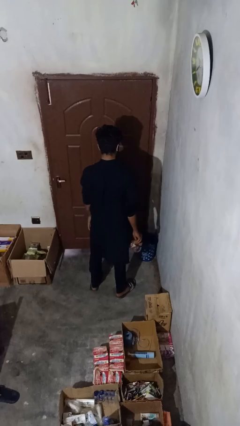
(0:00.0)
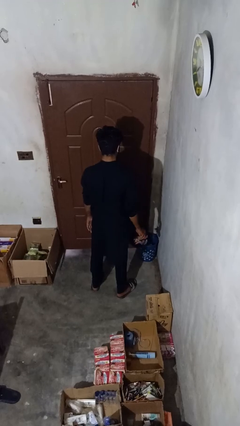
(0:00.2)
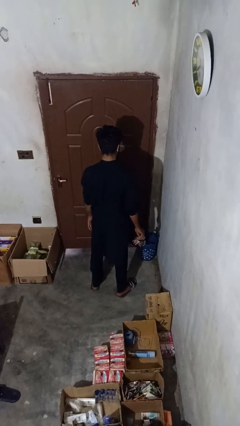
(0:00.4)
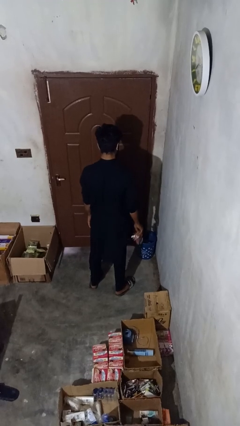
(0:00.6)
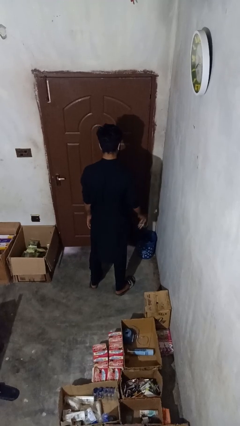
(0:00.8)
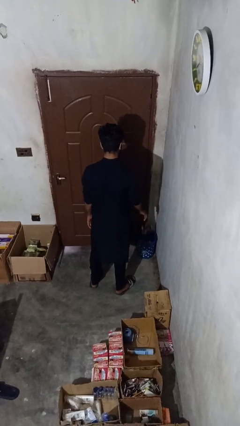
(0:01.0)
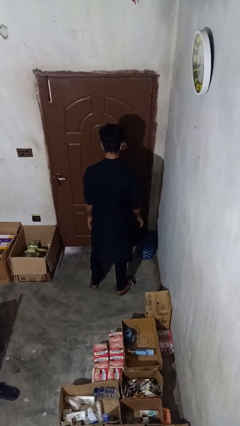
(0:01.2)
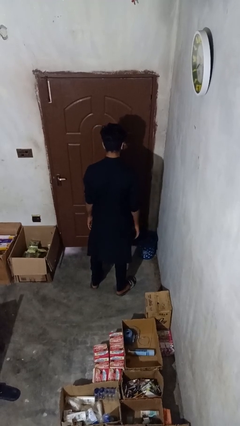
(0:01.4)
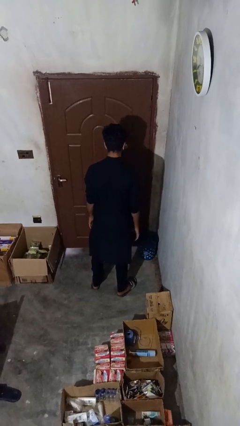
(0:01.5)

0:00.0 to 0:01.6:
person discards trash

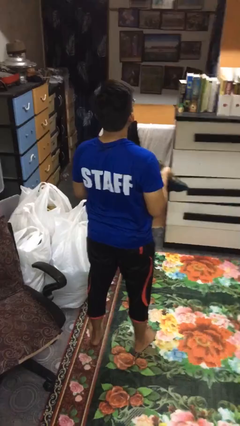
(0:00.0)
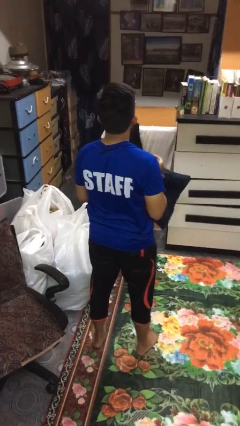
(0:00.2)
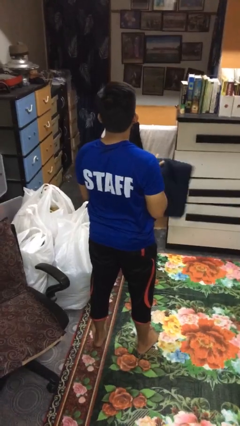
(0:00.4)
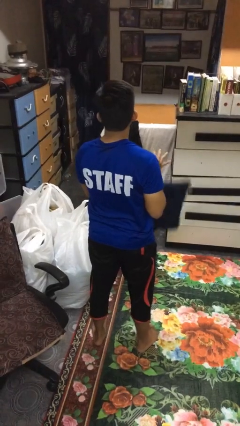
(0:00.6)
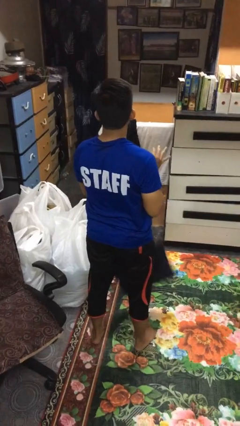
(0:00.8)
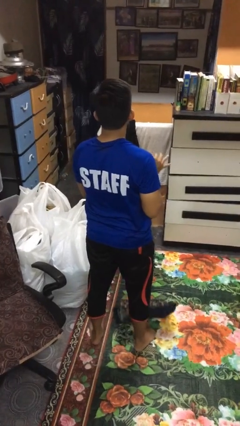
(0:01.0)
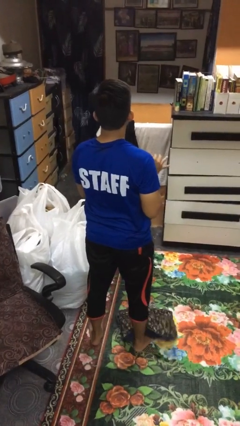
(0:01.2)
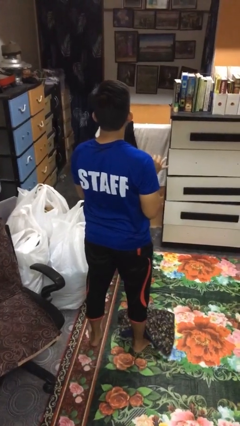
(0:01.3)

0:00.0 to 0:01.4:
person drops object

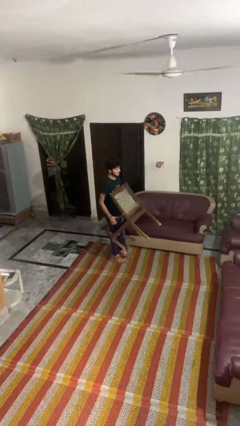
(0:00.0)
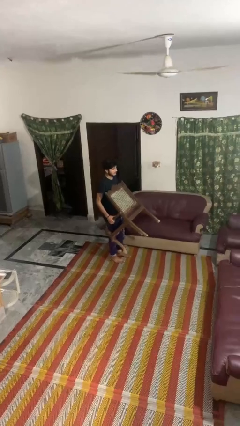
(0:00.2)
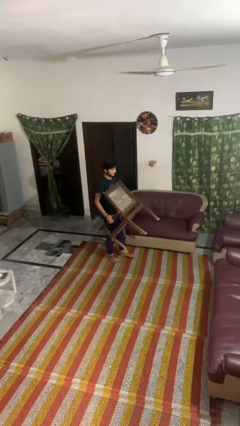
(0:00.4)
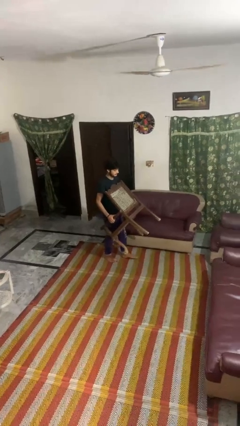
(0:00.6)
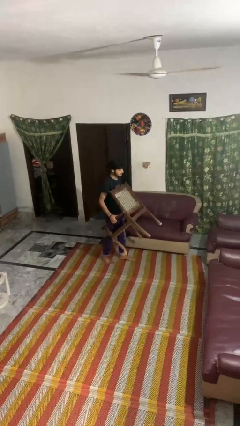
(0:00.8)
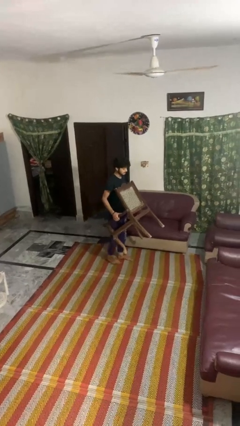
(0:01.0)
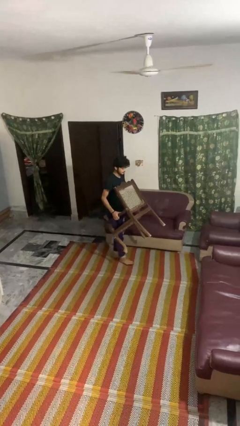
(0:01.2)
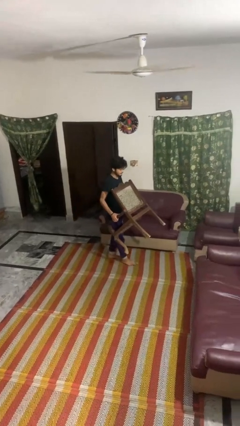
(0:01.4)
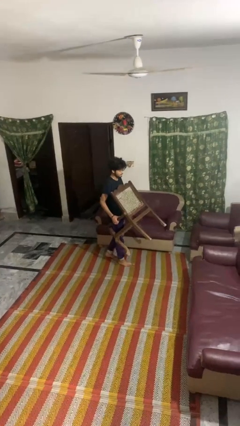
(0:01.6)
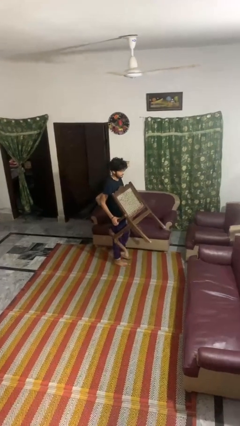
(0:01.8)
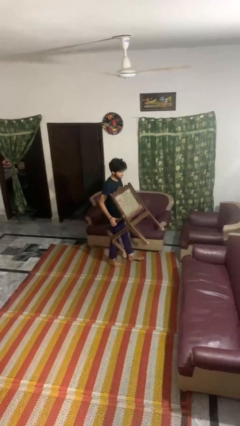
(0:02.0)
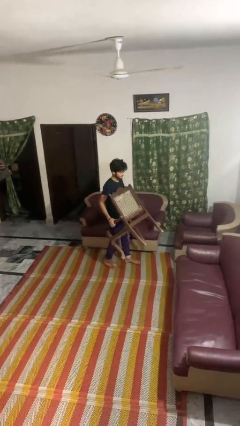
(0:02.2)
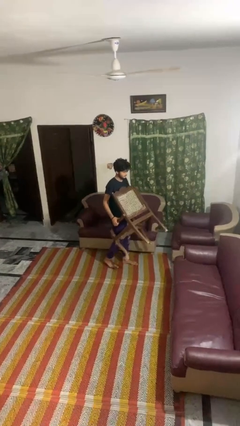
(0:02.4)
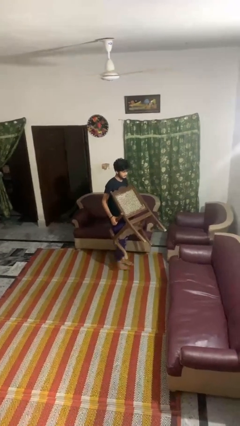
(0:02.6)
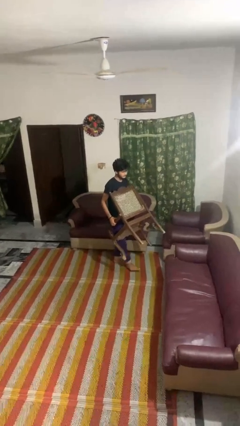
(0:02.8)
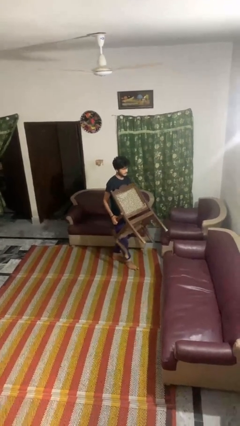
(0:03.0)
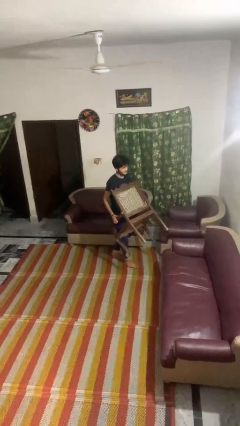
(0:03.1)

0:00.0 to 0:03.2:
person carries furniture

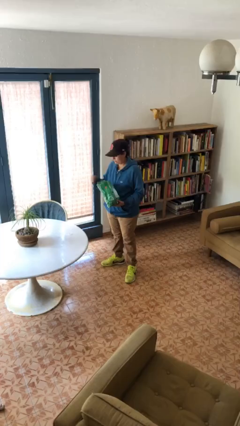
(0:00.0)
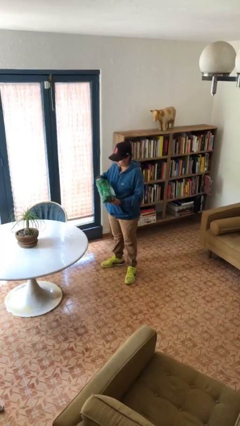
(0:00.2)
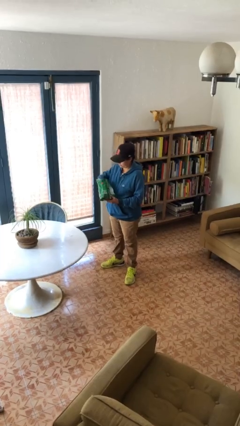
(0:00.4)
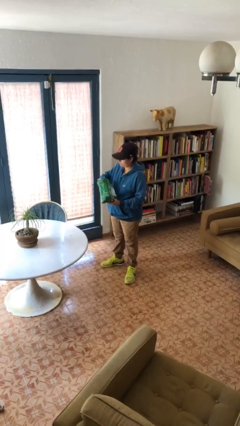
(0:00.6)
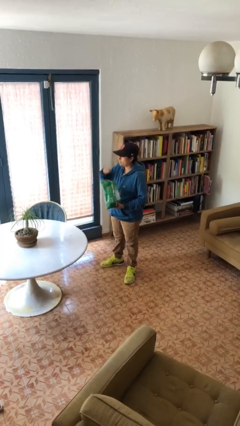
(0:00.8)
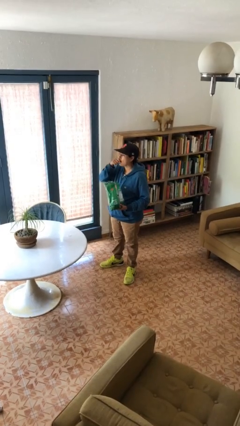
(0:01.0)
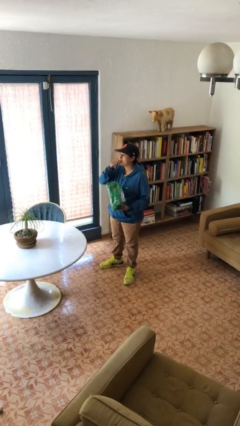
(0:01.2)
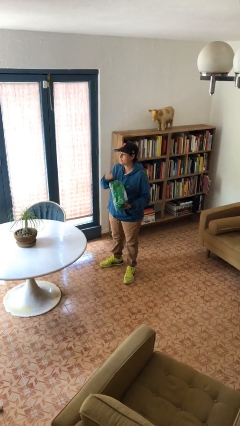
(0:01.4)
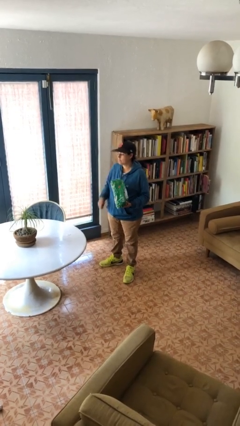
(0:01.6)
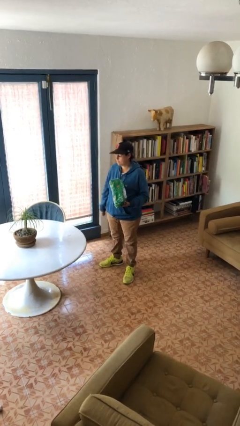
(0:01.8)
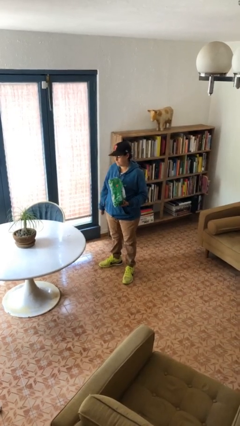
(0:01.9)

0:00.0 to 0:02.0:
person eats snack from bag

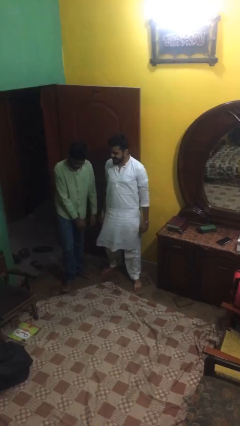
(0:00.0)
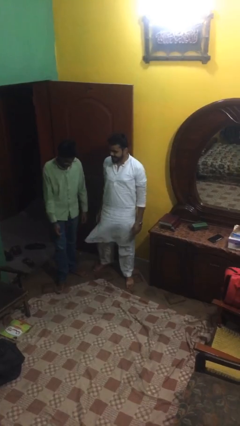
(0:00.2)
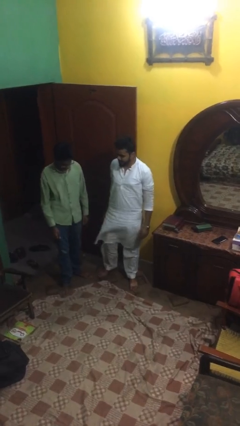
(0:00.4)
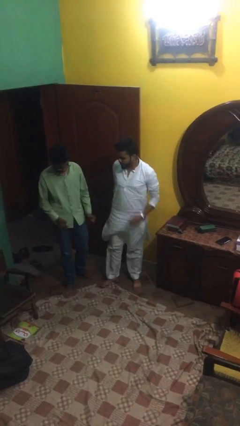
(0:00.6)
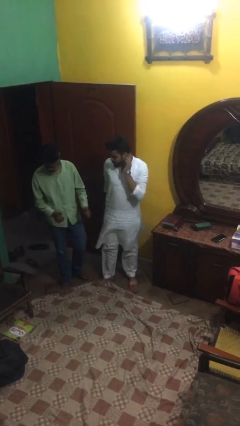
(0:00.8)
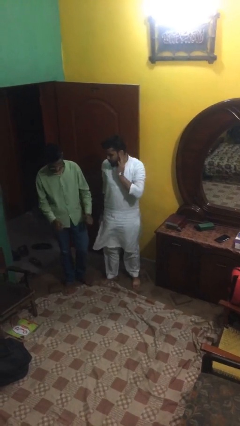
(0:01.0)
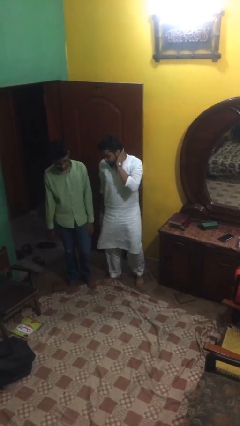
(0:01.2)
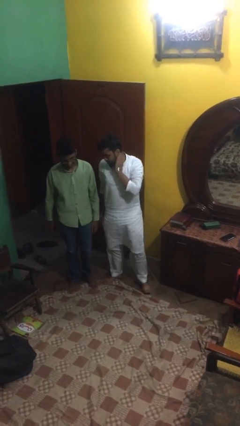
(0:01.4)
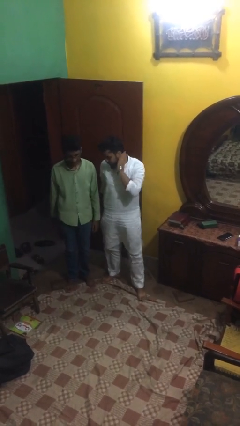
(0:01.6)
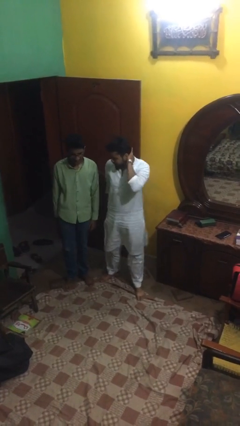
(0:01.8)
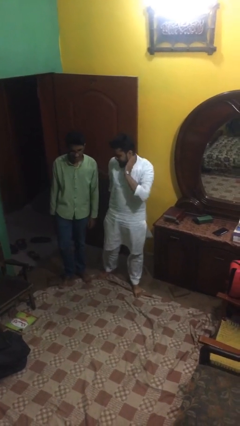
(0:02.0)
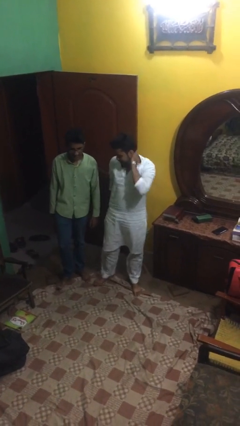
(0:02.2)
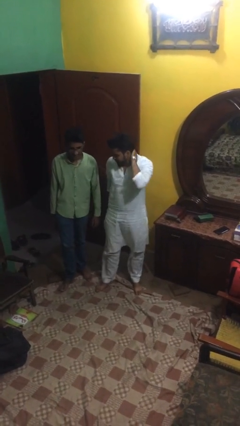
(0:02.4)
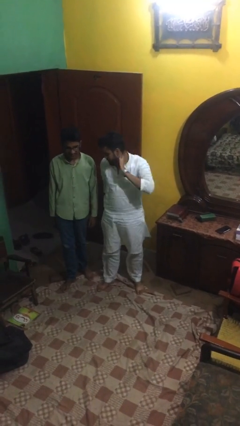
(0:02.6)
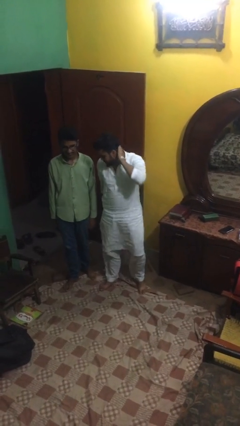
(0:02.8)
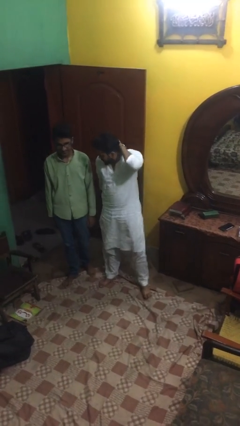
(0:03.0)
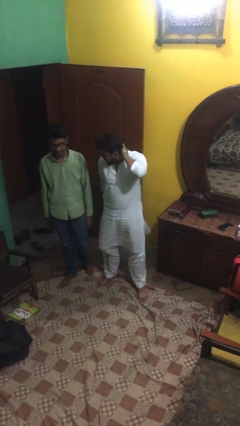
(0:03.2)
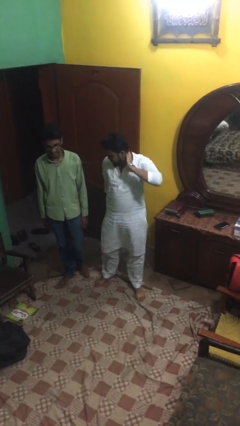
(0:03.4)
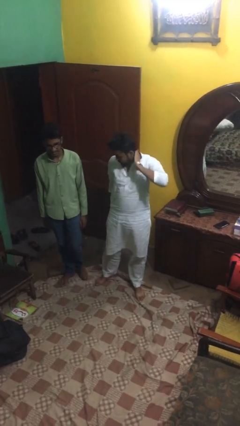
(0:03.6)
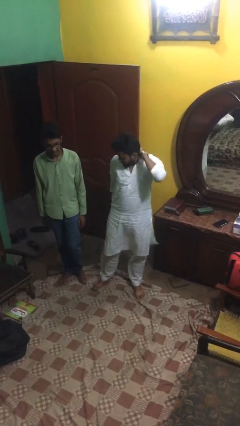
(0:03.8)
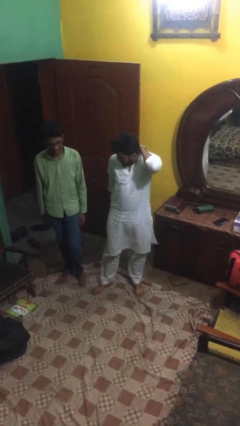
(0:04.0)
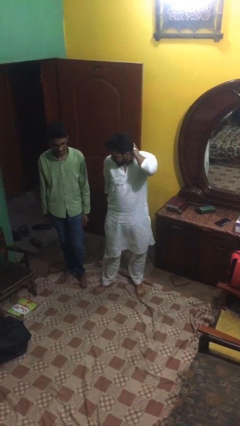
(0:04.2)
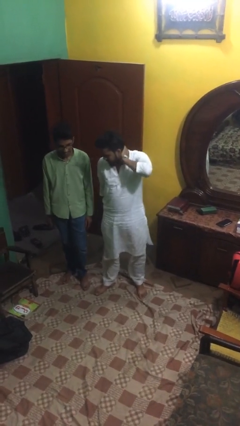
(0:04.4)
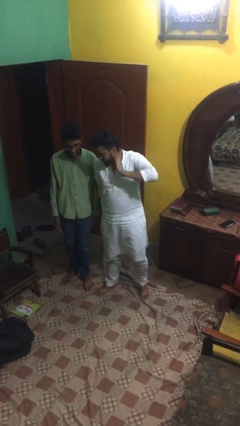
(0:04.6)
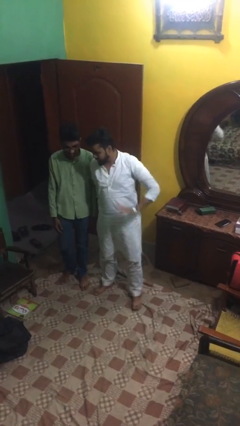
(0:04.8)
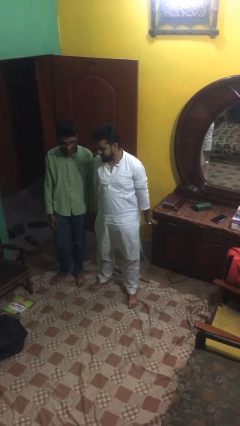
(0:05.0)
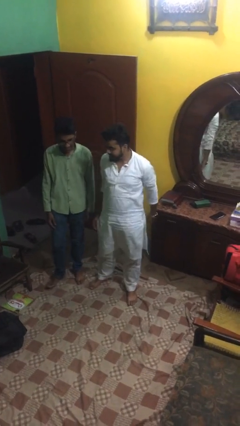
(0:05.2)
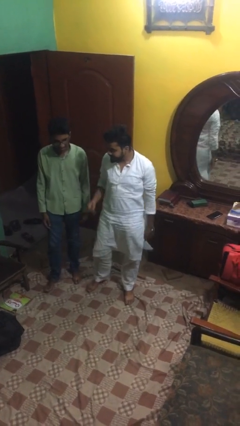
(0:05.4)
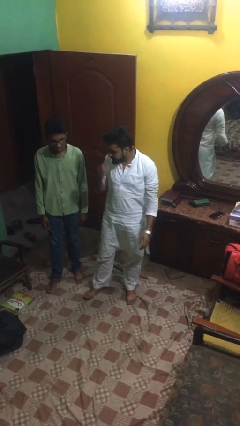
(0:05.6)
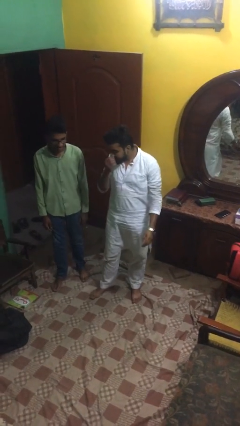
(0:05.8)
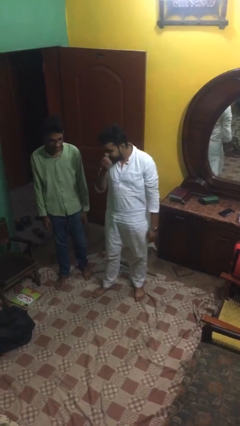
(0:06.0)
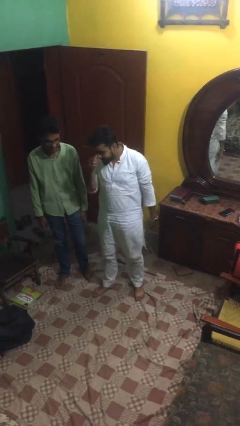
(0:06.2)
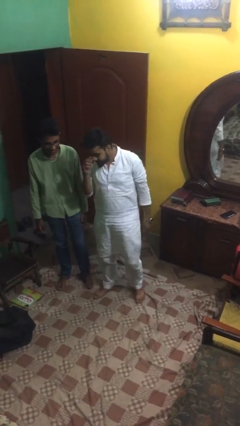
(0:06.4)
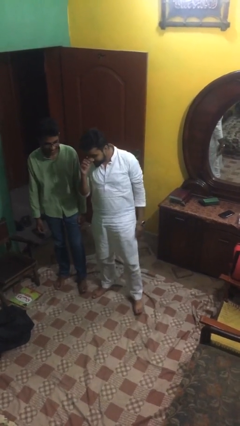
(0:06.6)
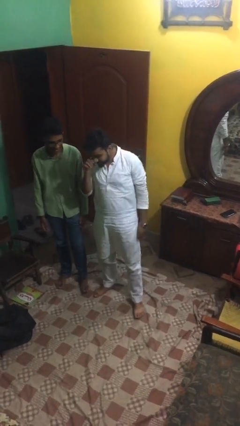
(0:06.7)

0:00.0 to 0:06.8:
person talks to person

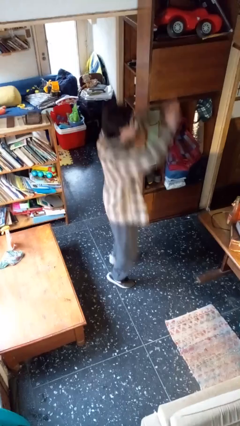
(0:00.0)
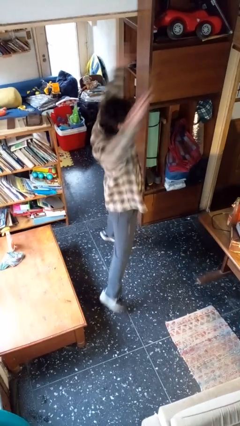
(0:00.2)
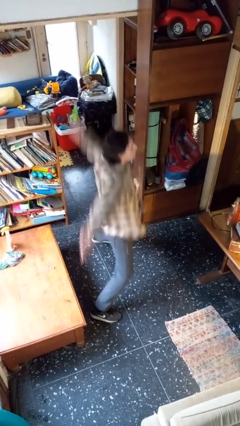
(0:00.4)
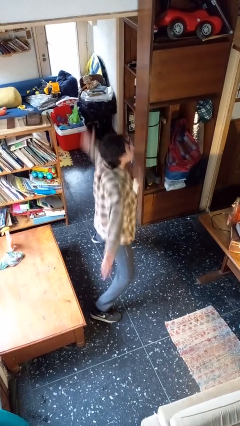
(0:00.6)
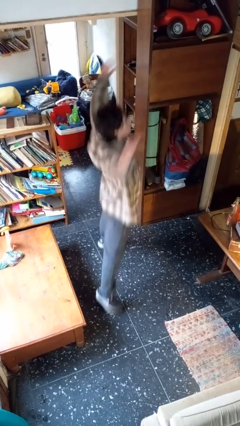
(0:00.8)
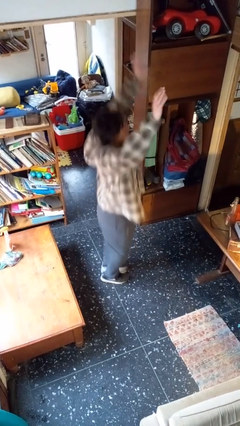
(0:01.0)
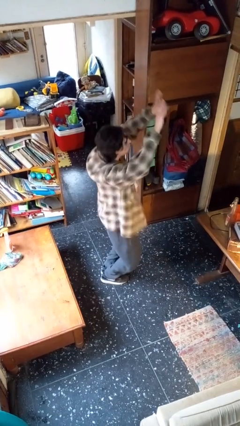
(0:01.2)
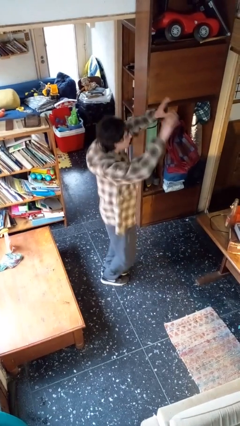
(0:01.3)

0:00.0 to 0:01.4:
person exercises with jumping jacks

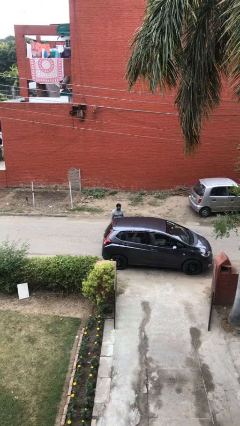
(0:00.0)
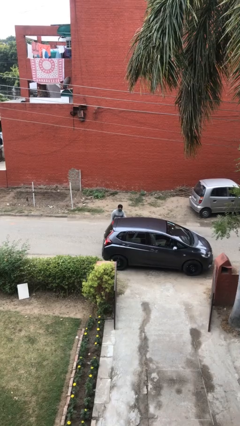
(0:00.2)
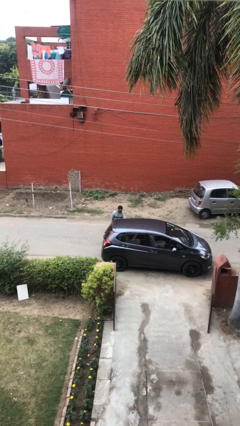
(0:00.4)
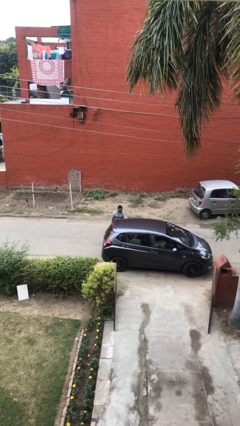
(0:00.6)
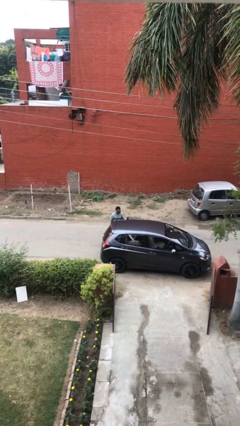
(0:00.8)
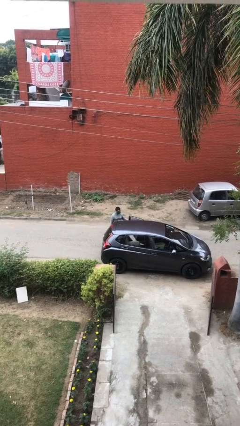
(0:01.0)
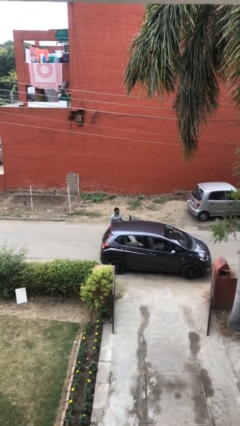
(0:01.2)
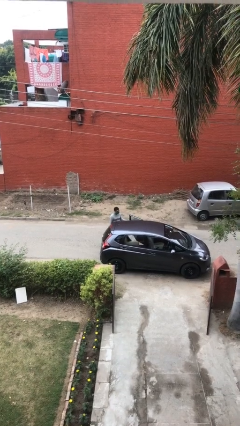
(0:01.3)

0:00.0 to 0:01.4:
person opens car door
